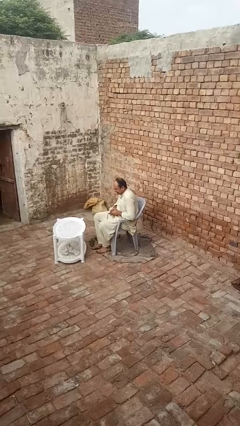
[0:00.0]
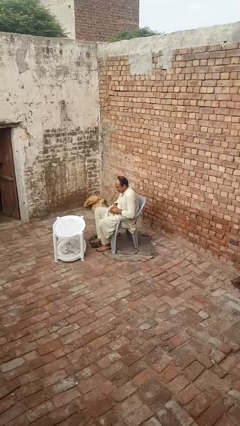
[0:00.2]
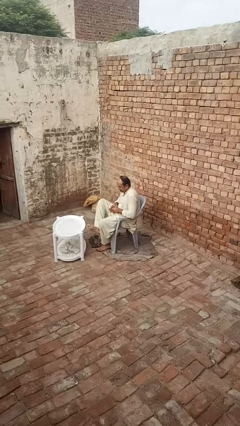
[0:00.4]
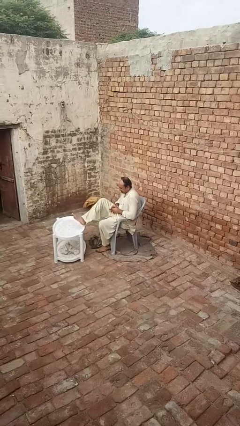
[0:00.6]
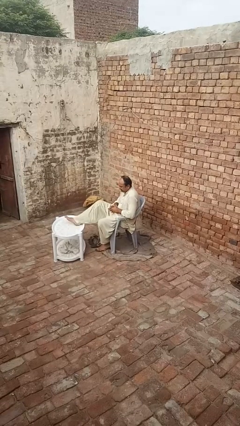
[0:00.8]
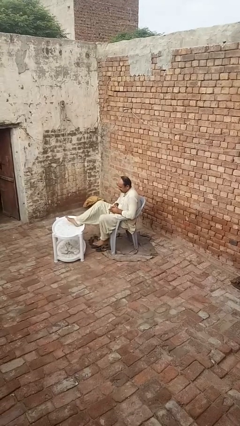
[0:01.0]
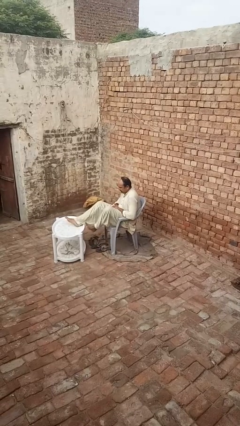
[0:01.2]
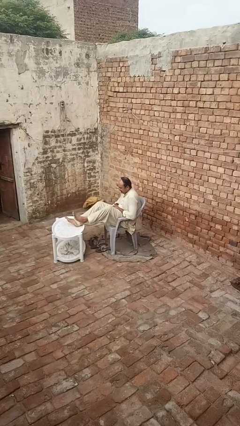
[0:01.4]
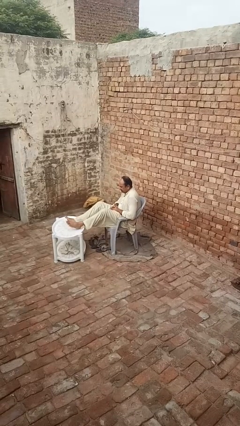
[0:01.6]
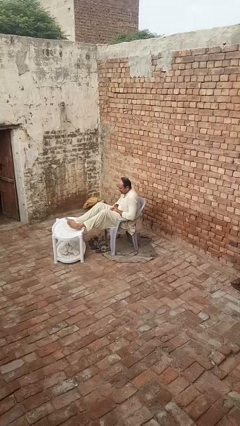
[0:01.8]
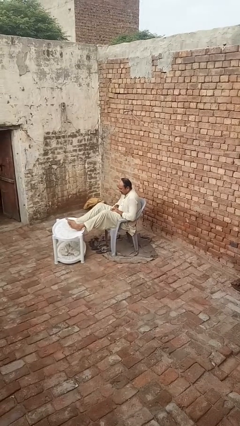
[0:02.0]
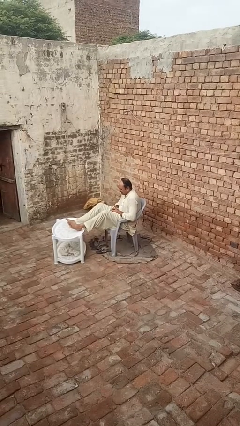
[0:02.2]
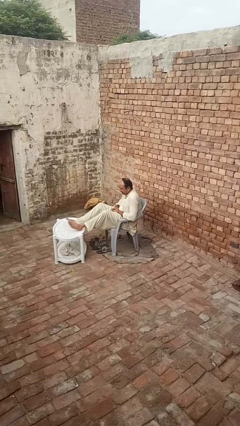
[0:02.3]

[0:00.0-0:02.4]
person puts feet up

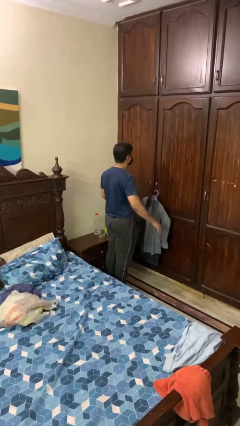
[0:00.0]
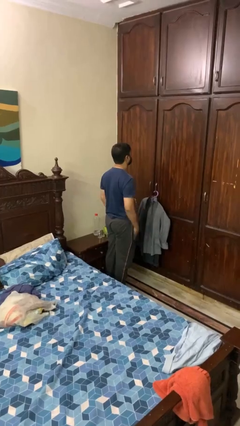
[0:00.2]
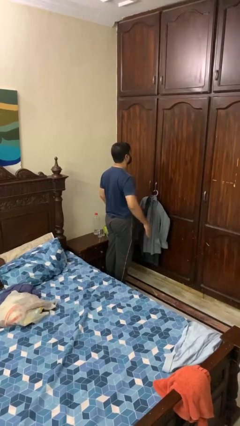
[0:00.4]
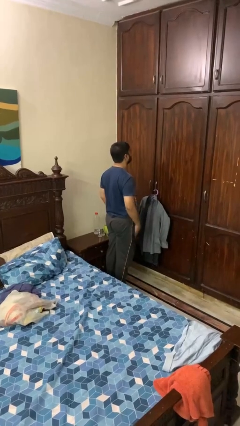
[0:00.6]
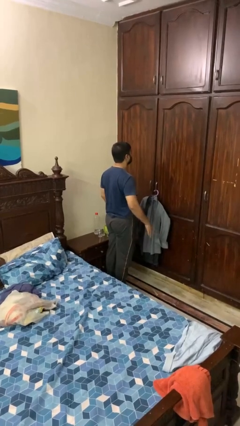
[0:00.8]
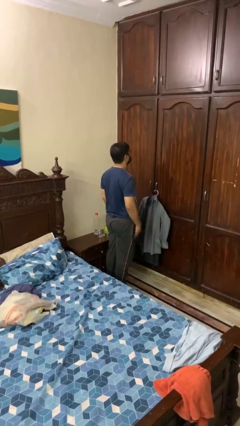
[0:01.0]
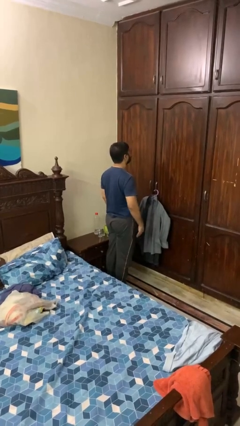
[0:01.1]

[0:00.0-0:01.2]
person slaps hands on thighs

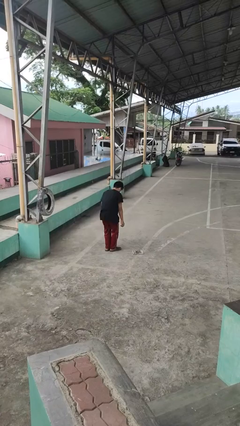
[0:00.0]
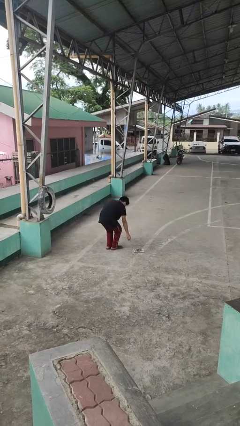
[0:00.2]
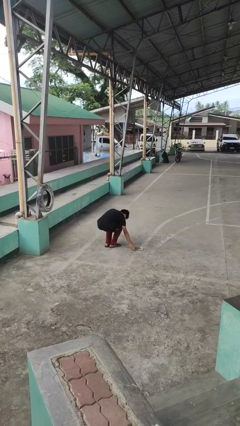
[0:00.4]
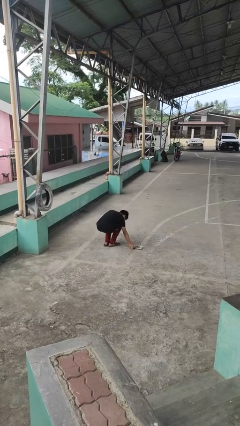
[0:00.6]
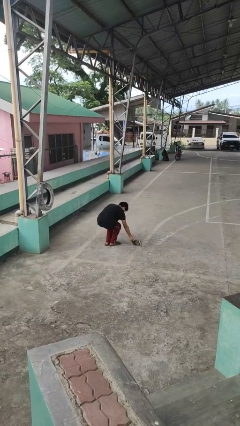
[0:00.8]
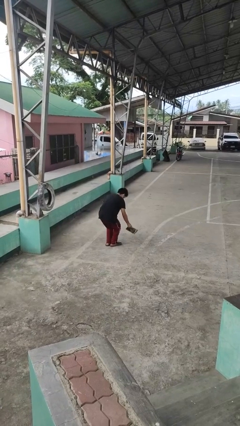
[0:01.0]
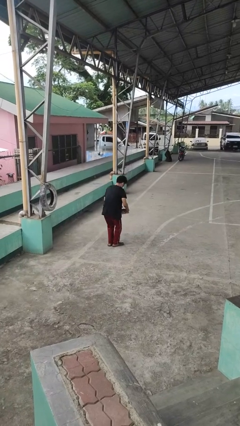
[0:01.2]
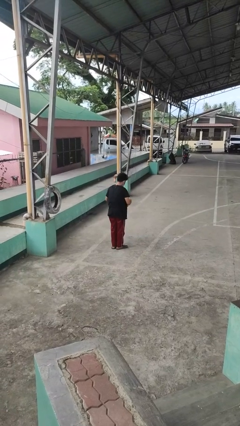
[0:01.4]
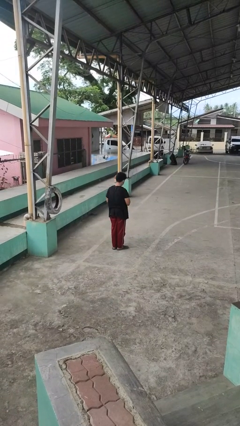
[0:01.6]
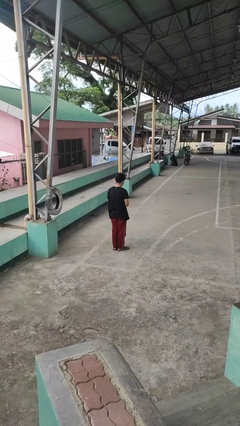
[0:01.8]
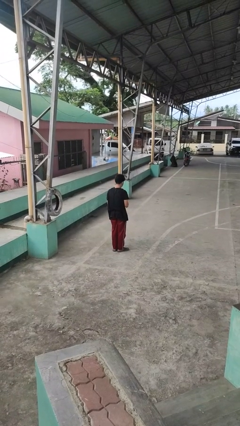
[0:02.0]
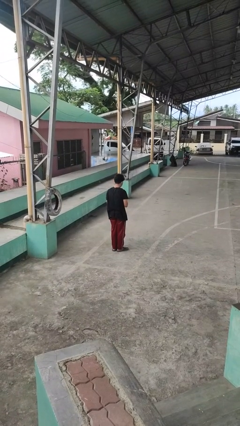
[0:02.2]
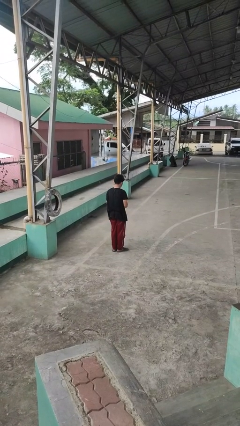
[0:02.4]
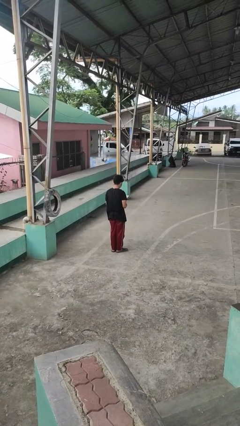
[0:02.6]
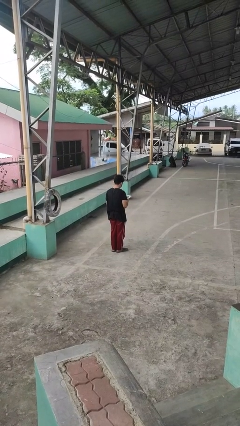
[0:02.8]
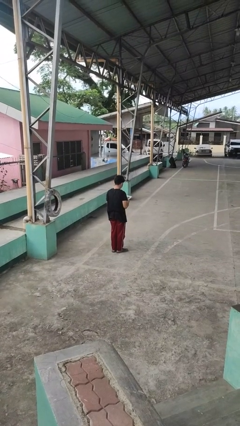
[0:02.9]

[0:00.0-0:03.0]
person picks up object from floor

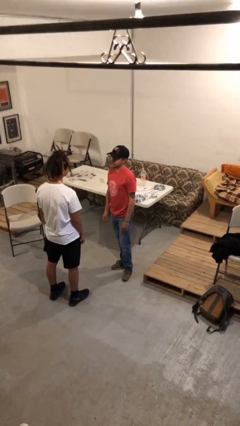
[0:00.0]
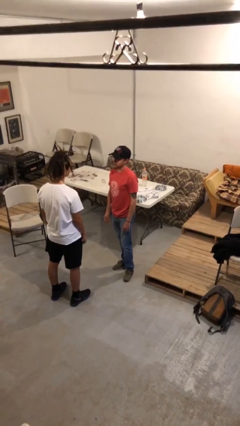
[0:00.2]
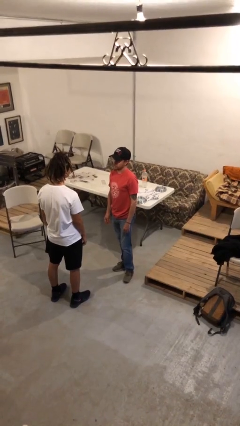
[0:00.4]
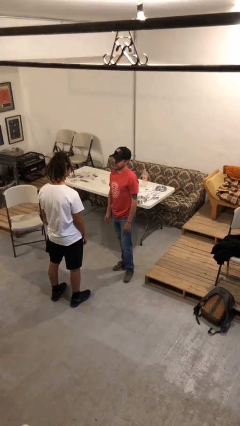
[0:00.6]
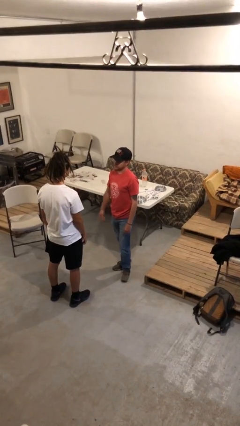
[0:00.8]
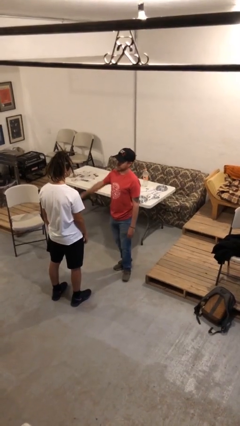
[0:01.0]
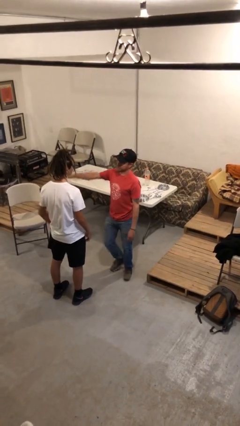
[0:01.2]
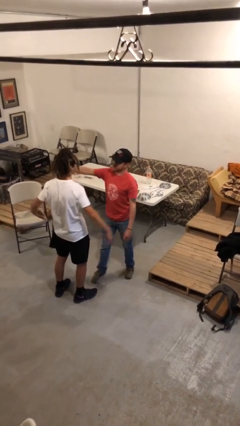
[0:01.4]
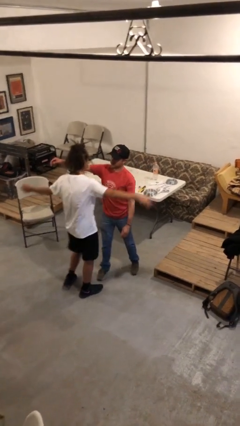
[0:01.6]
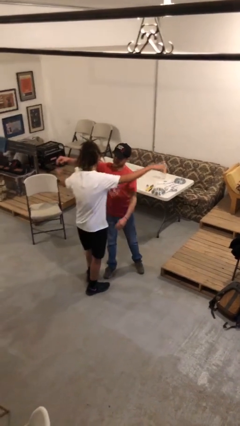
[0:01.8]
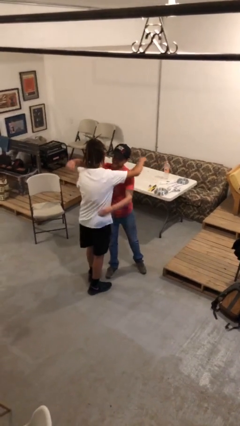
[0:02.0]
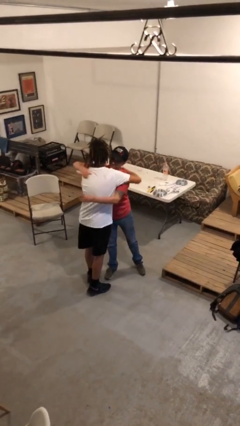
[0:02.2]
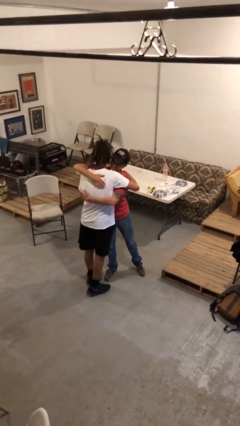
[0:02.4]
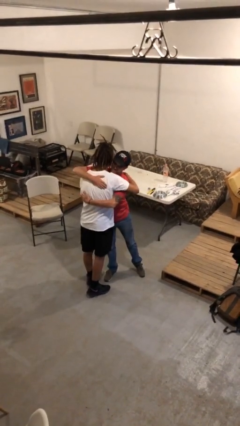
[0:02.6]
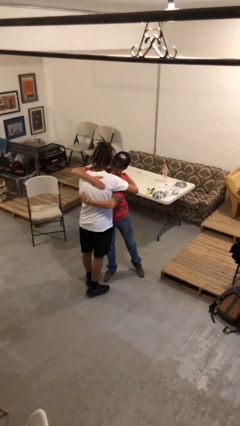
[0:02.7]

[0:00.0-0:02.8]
person embraces person

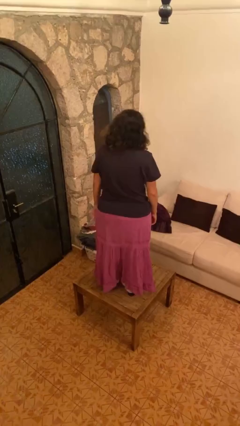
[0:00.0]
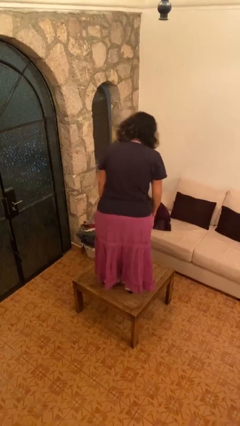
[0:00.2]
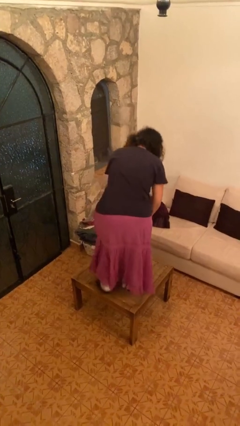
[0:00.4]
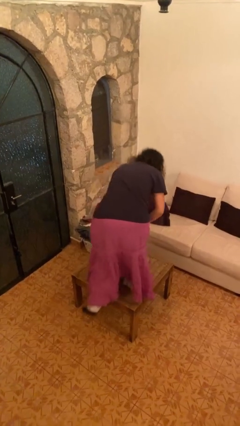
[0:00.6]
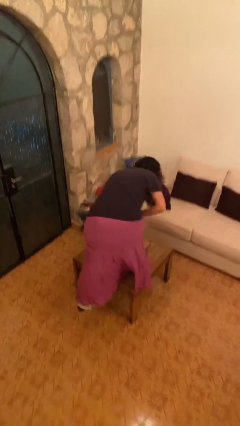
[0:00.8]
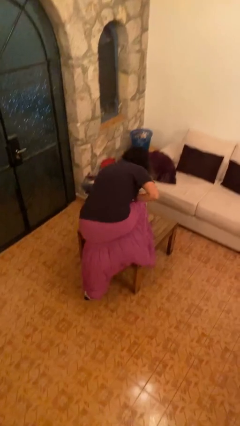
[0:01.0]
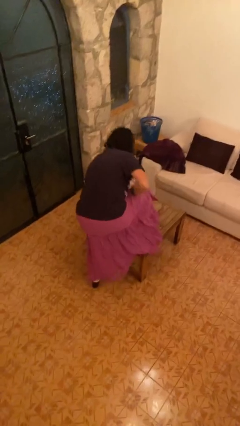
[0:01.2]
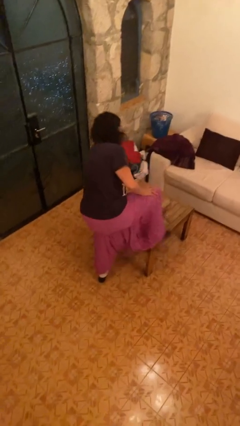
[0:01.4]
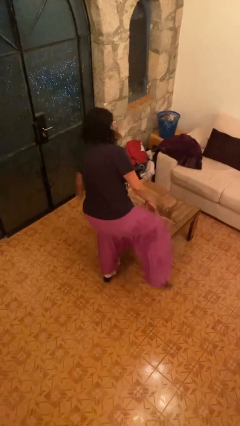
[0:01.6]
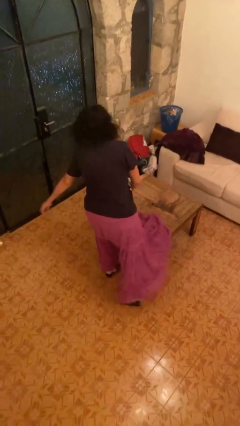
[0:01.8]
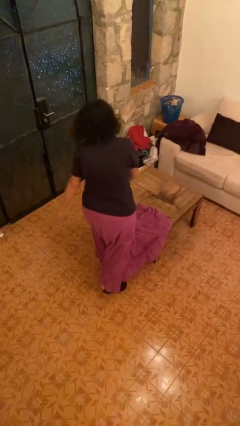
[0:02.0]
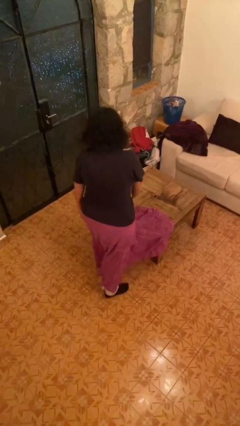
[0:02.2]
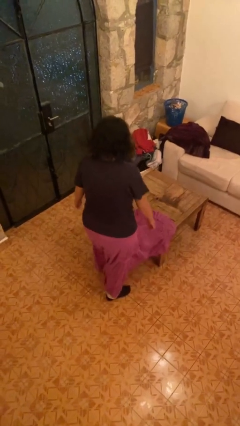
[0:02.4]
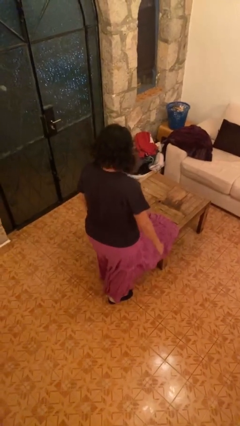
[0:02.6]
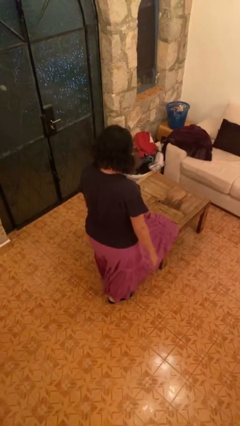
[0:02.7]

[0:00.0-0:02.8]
person climbs off table

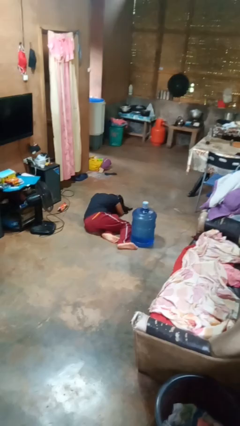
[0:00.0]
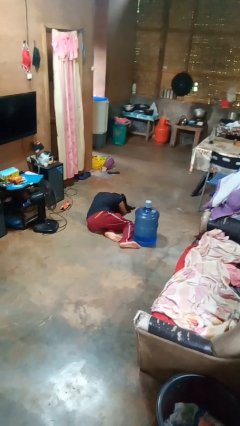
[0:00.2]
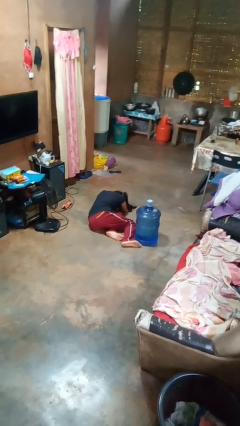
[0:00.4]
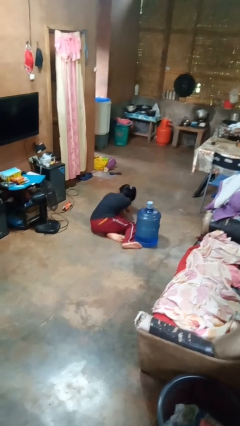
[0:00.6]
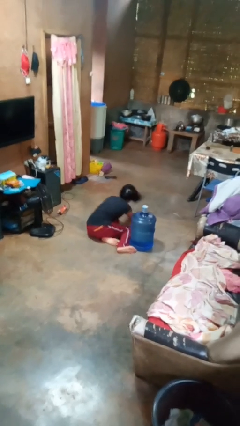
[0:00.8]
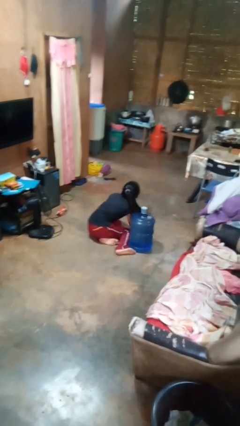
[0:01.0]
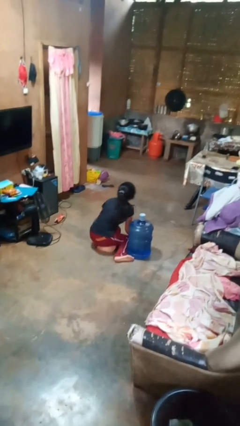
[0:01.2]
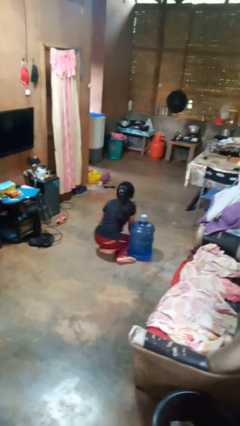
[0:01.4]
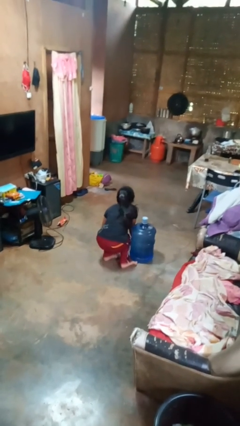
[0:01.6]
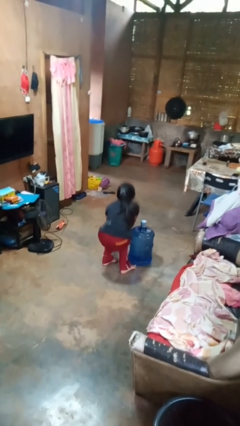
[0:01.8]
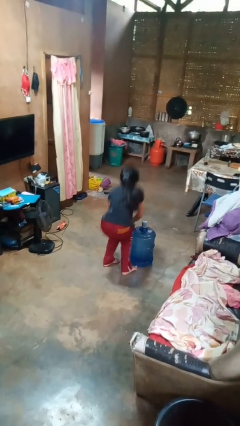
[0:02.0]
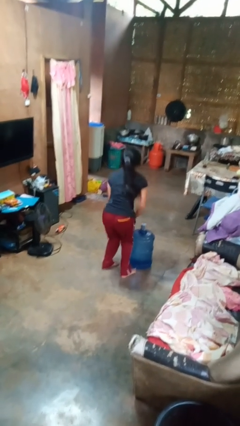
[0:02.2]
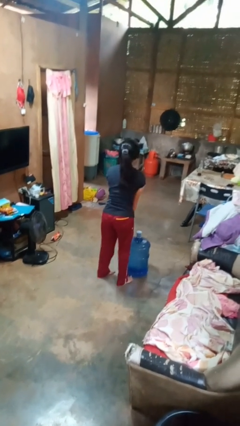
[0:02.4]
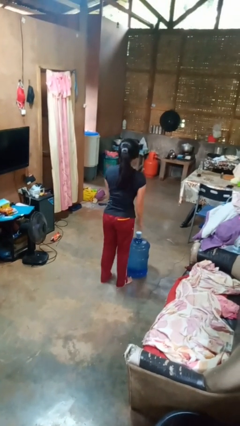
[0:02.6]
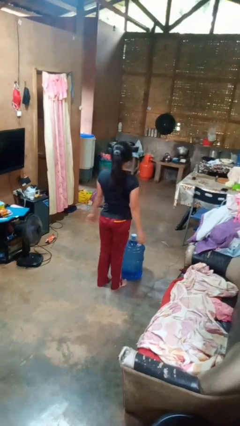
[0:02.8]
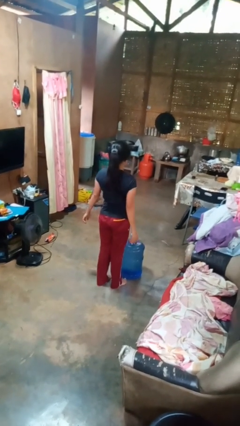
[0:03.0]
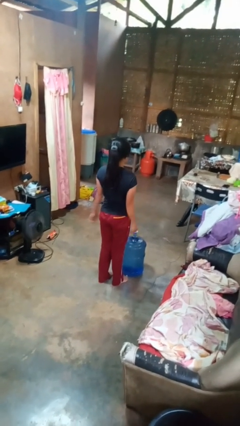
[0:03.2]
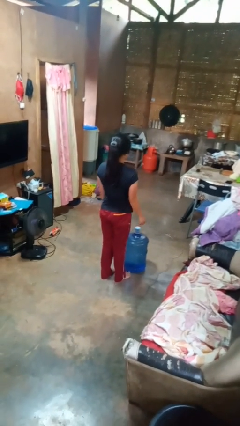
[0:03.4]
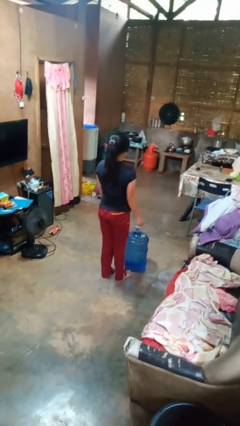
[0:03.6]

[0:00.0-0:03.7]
person stands up from floor

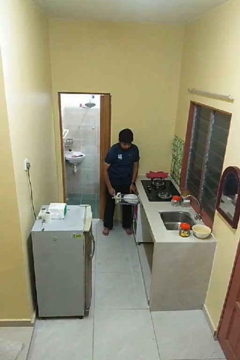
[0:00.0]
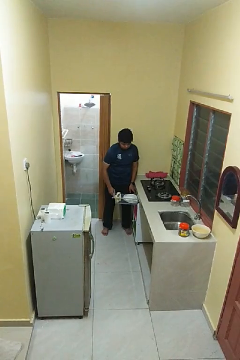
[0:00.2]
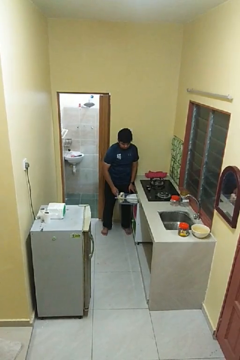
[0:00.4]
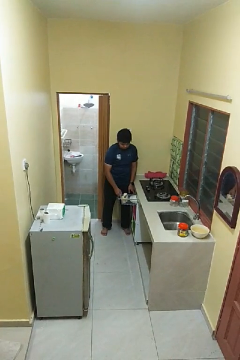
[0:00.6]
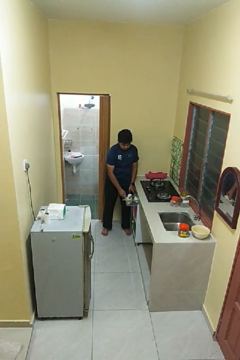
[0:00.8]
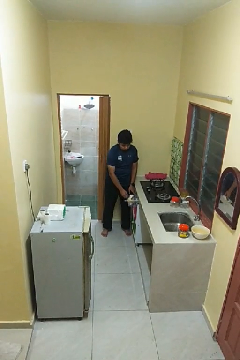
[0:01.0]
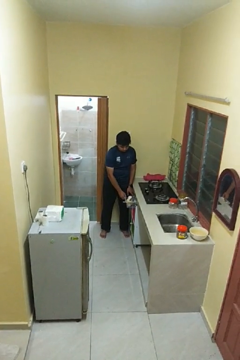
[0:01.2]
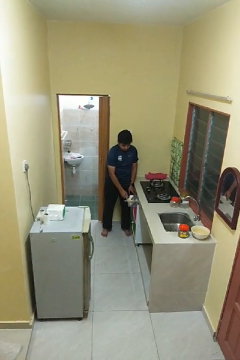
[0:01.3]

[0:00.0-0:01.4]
person closes kitchen drawer

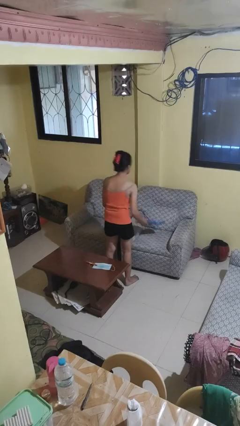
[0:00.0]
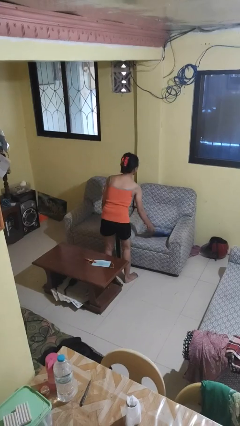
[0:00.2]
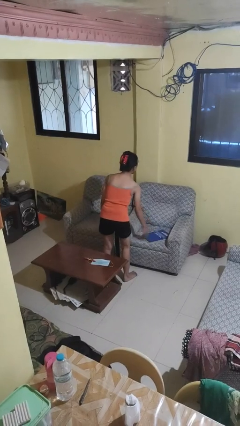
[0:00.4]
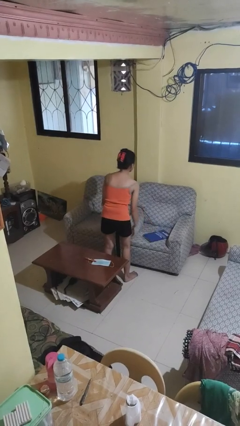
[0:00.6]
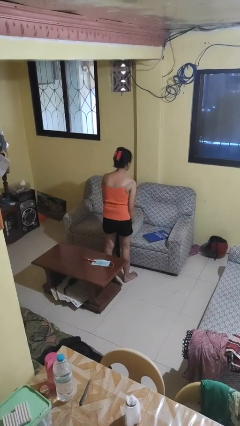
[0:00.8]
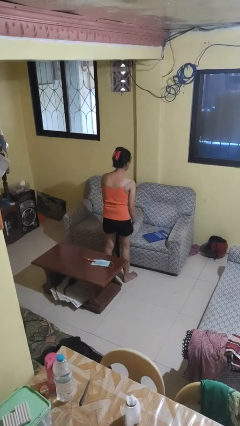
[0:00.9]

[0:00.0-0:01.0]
person puts down object on couch
